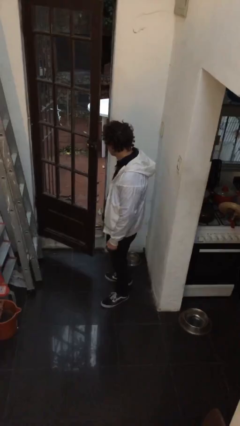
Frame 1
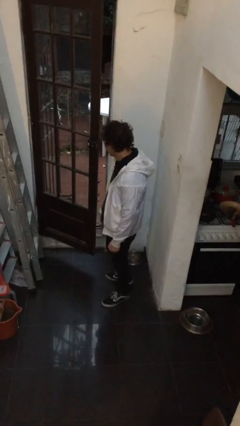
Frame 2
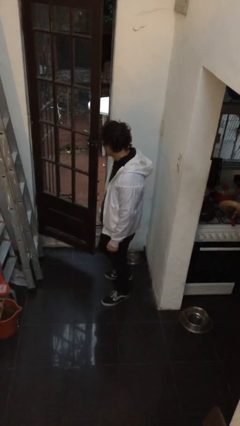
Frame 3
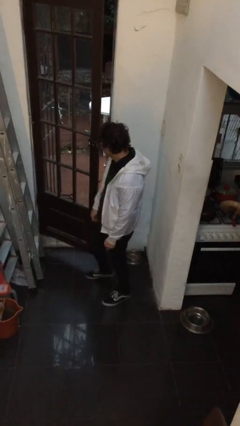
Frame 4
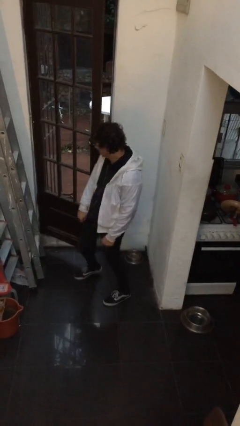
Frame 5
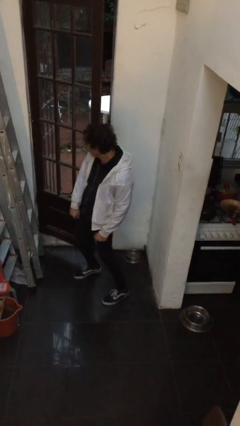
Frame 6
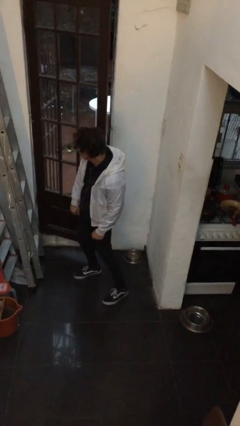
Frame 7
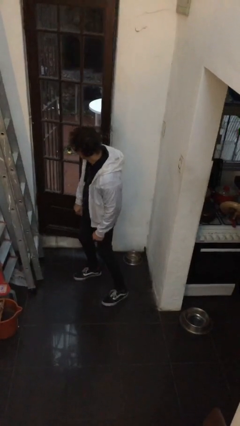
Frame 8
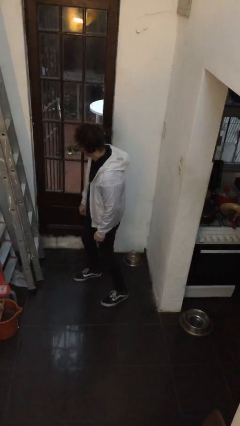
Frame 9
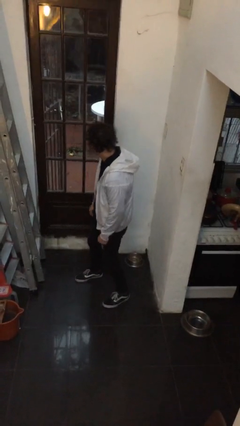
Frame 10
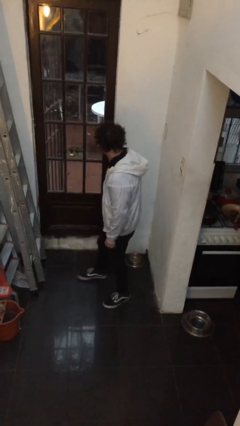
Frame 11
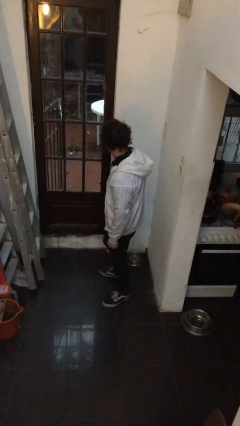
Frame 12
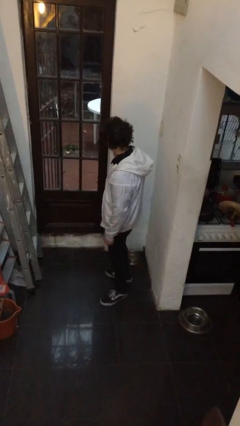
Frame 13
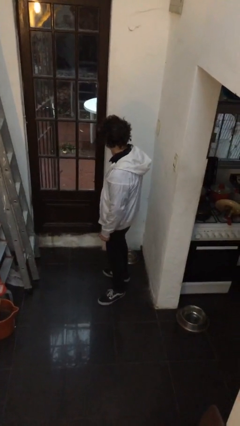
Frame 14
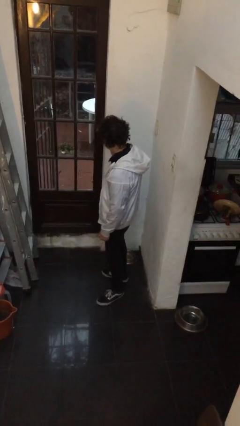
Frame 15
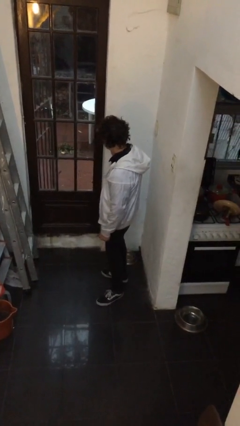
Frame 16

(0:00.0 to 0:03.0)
person closes door with hip

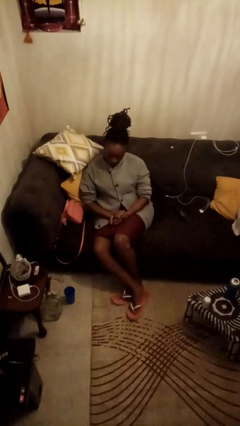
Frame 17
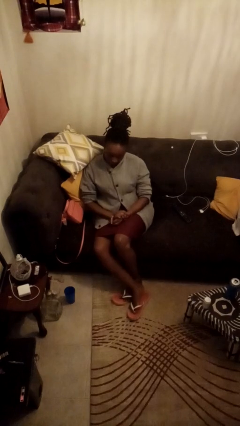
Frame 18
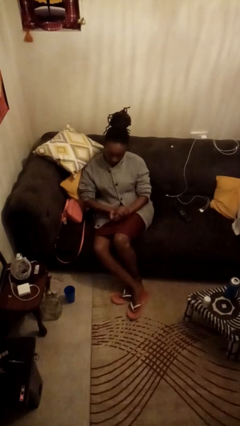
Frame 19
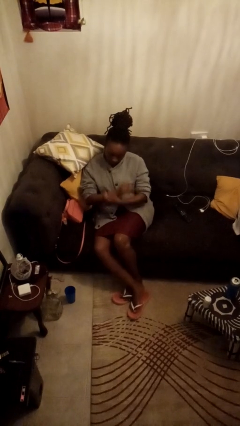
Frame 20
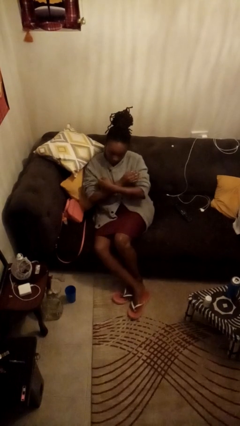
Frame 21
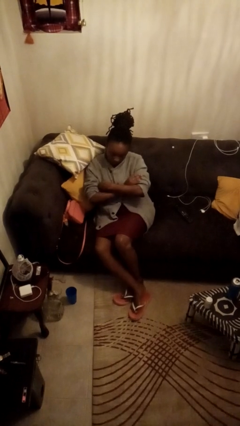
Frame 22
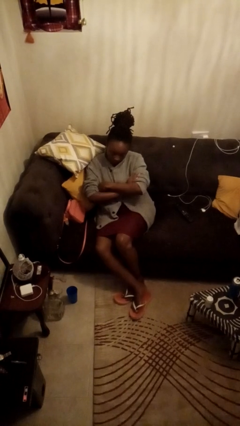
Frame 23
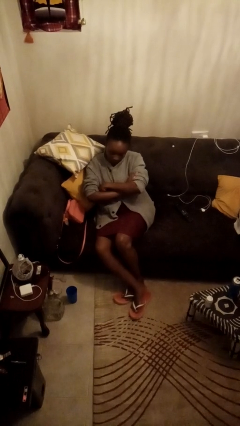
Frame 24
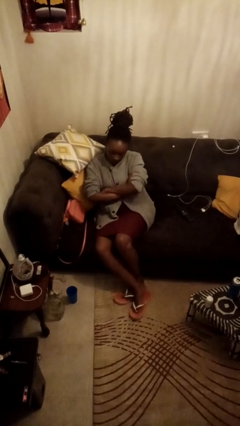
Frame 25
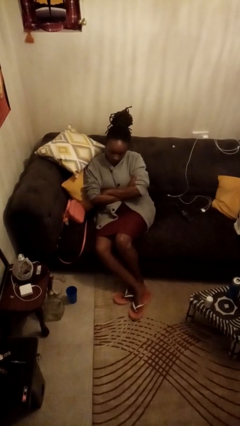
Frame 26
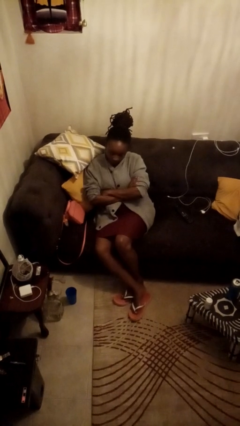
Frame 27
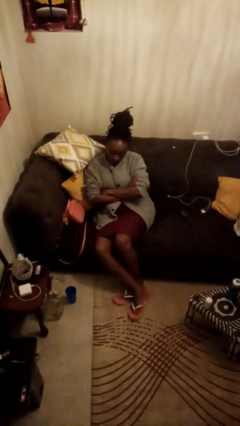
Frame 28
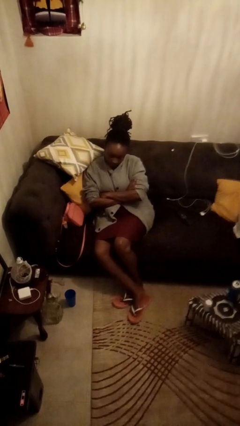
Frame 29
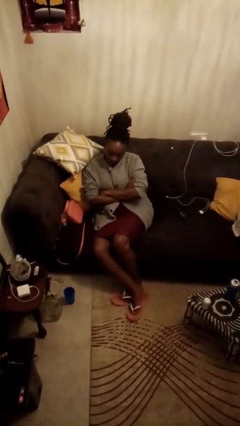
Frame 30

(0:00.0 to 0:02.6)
person crosses arms

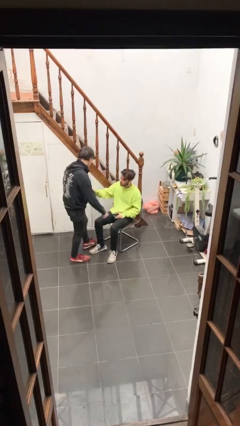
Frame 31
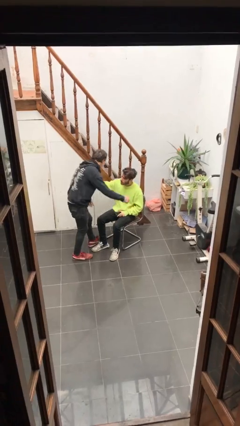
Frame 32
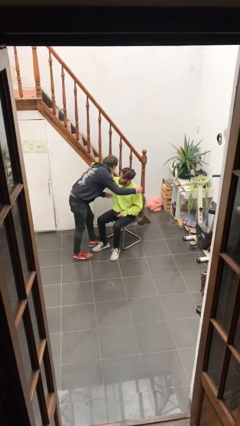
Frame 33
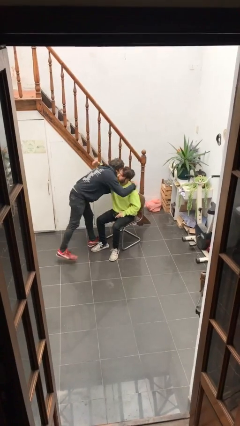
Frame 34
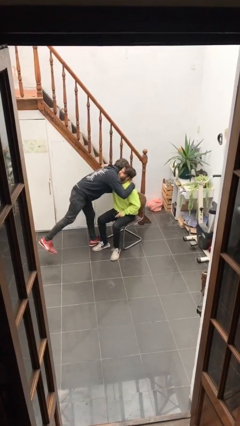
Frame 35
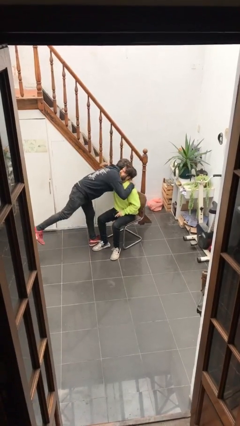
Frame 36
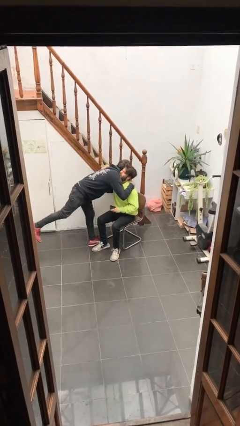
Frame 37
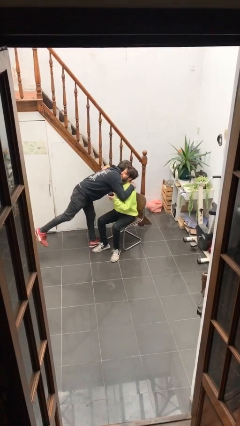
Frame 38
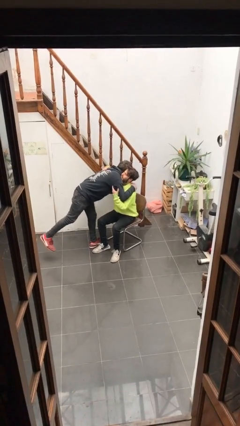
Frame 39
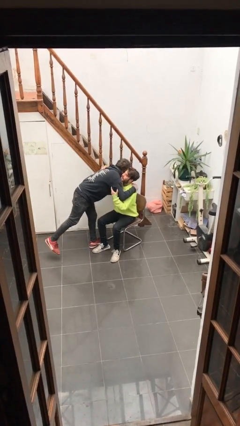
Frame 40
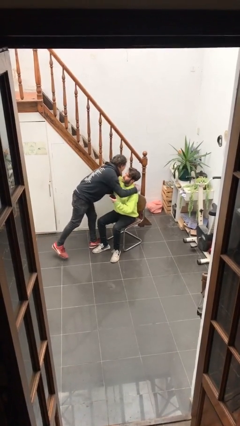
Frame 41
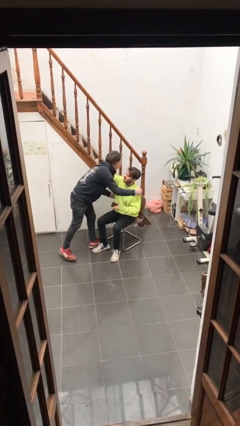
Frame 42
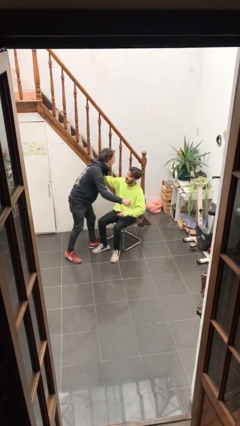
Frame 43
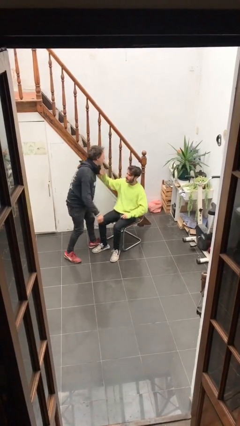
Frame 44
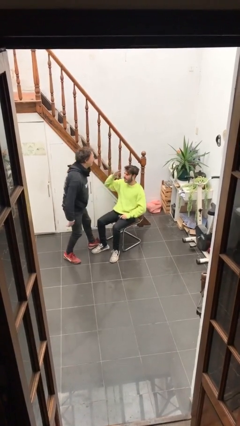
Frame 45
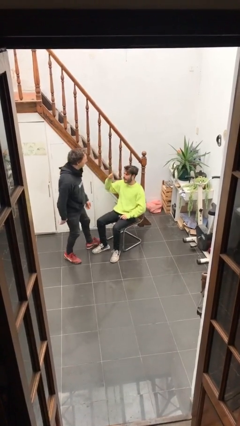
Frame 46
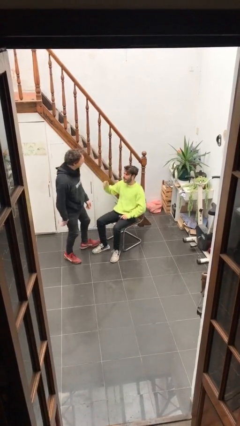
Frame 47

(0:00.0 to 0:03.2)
person embraces person

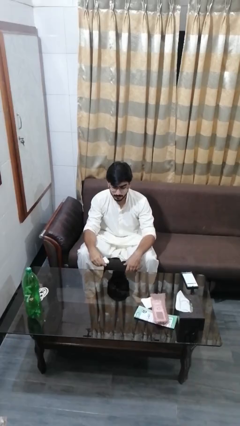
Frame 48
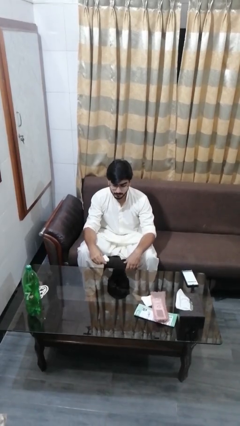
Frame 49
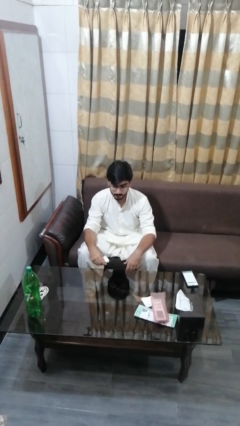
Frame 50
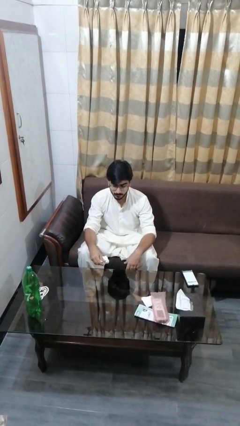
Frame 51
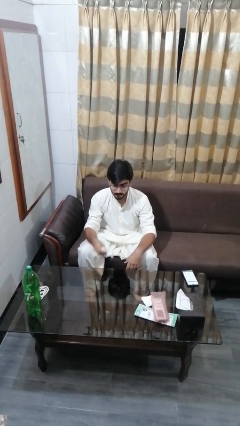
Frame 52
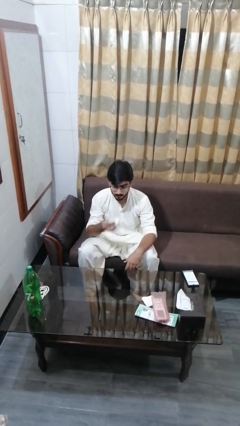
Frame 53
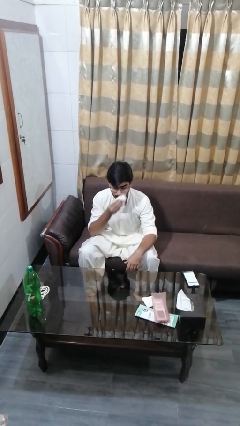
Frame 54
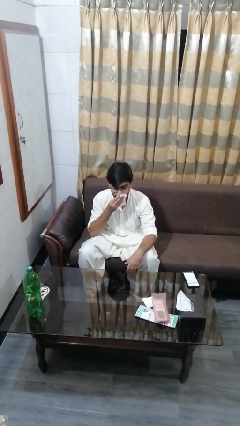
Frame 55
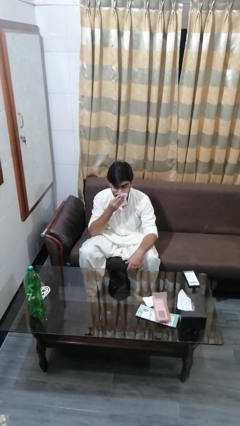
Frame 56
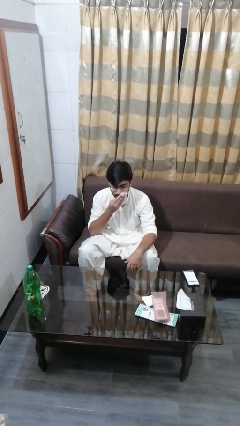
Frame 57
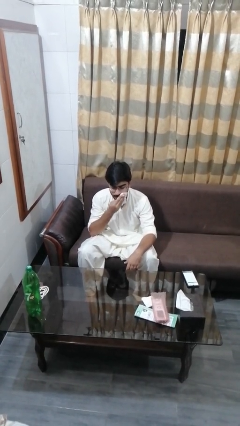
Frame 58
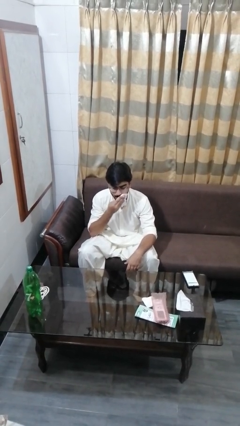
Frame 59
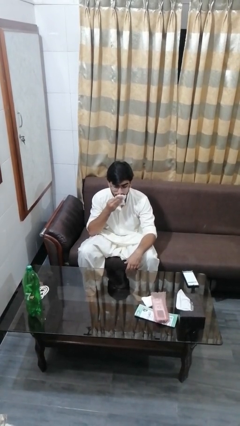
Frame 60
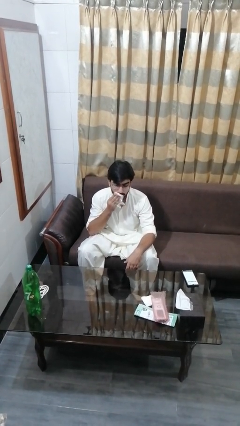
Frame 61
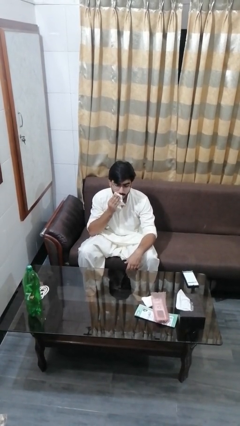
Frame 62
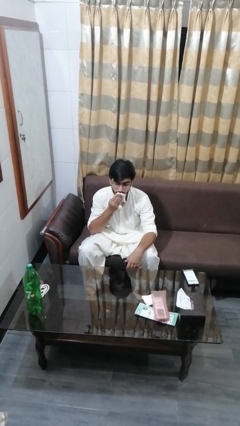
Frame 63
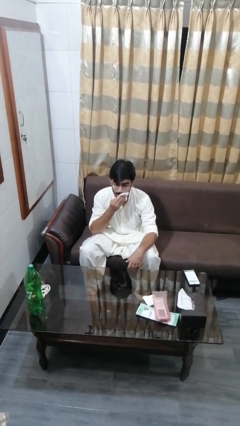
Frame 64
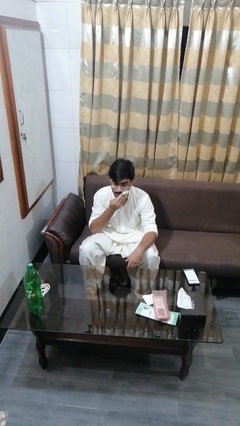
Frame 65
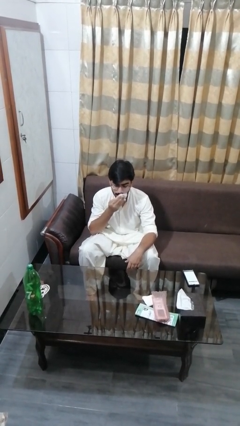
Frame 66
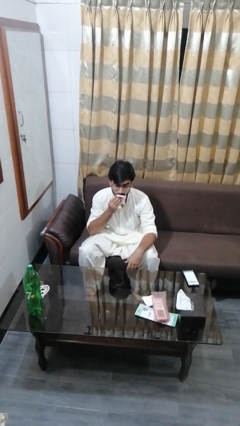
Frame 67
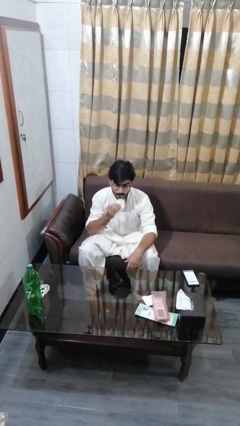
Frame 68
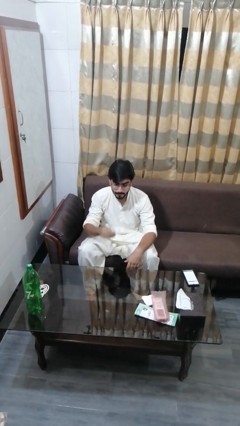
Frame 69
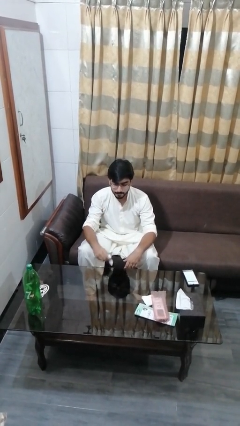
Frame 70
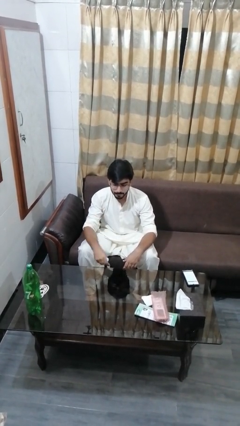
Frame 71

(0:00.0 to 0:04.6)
person wipes mouth with napkin

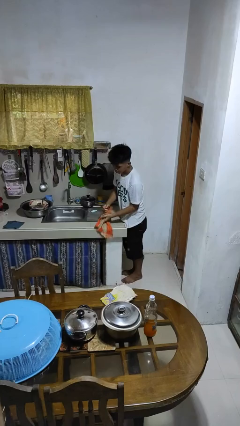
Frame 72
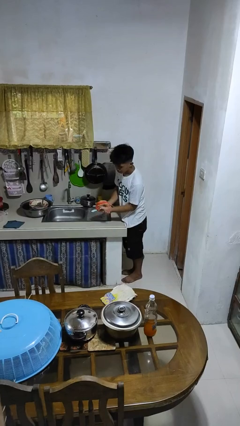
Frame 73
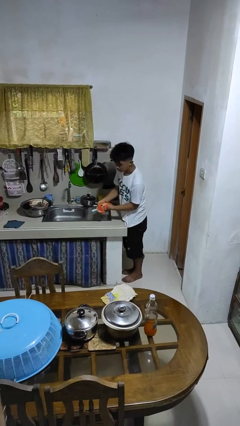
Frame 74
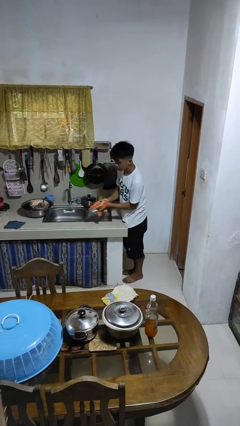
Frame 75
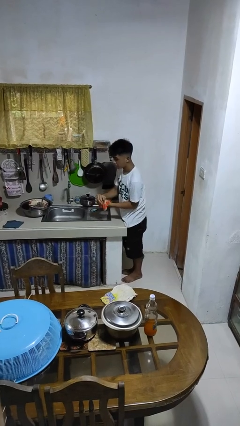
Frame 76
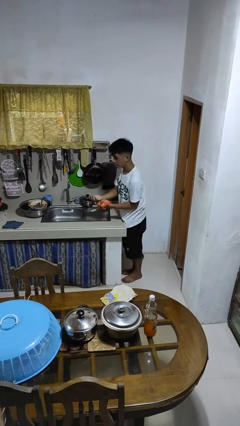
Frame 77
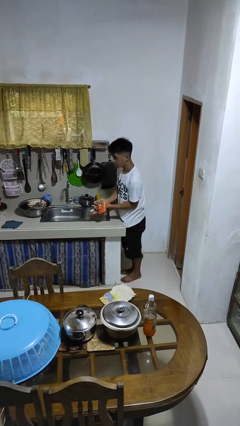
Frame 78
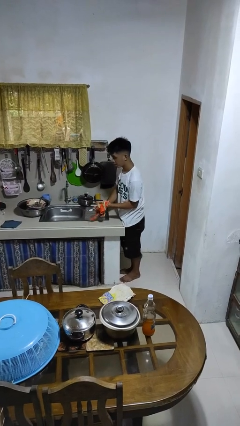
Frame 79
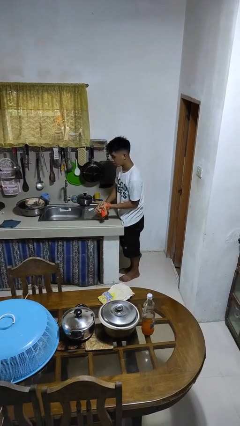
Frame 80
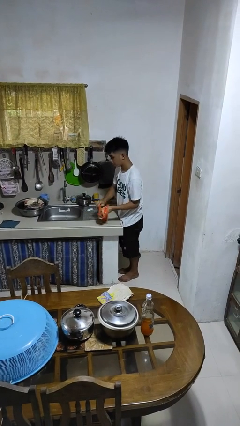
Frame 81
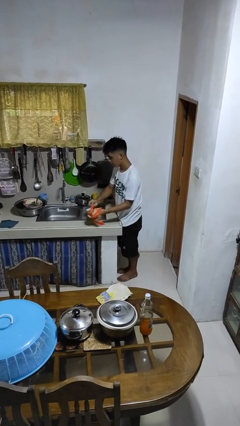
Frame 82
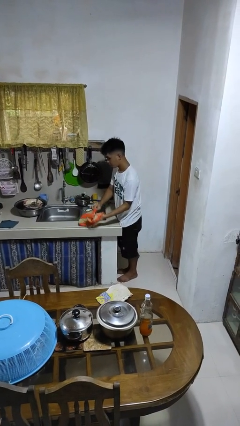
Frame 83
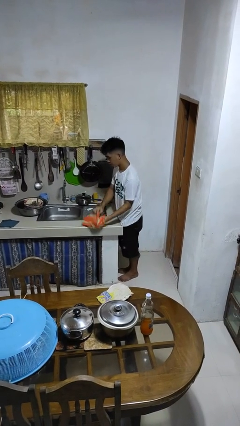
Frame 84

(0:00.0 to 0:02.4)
person dries hands with towel

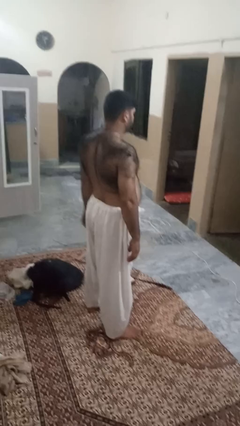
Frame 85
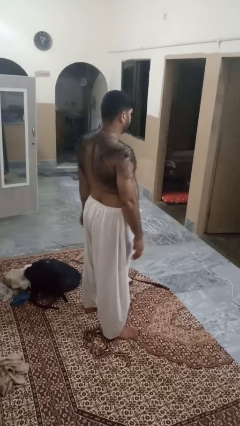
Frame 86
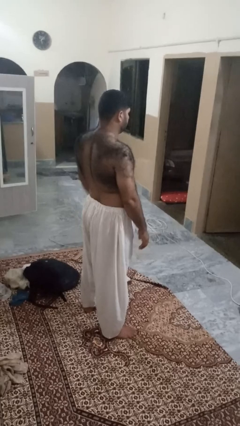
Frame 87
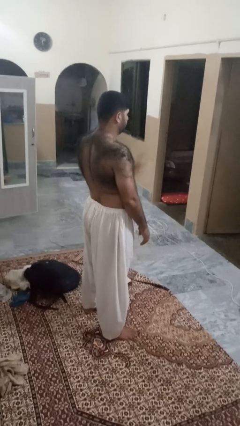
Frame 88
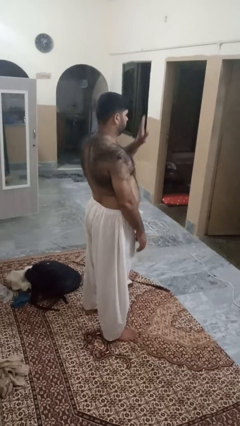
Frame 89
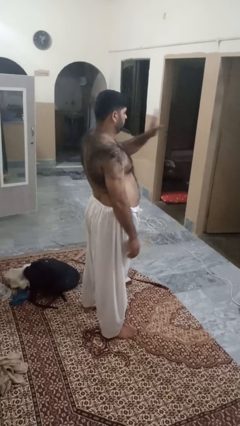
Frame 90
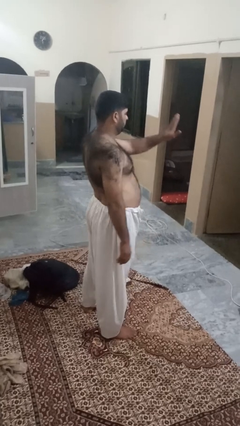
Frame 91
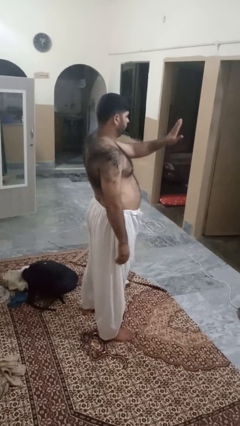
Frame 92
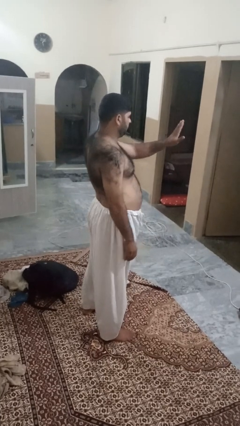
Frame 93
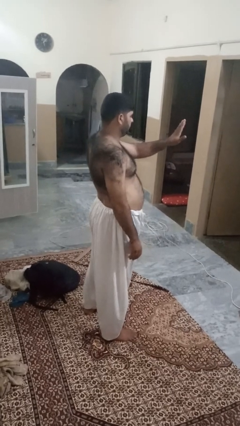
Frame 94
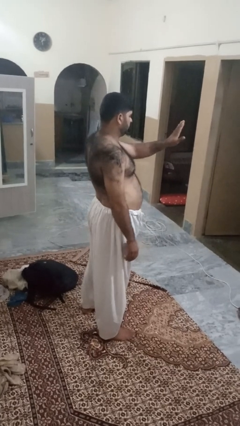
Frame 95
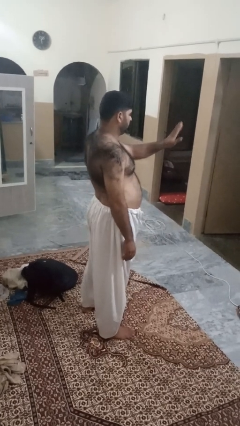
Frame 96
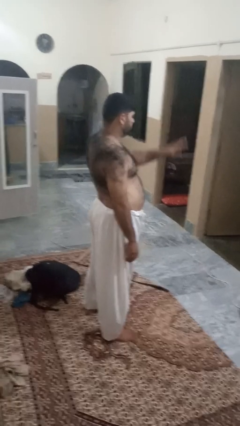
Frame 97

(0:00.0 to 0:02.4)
person gestures stop
